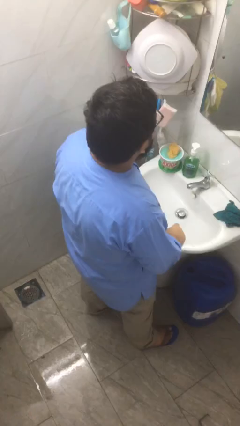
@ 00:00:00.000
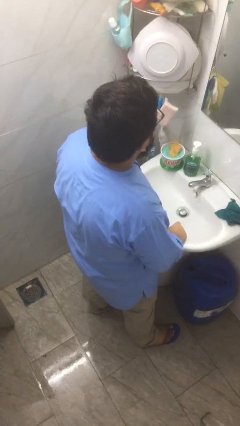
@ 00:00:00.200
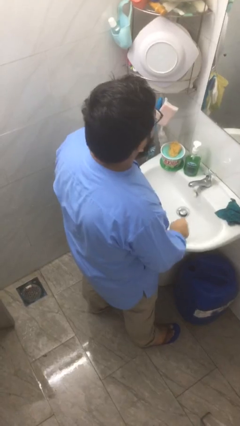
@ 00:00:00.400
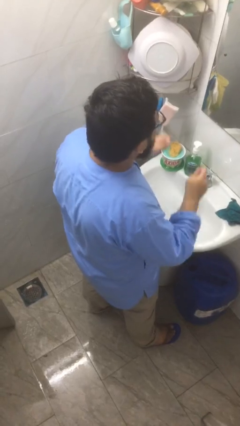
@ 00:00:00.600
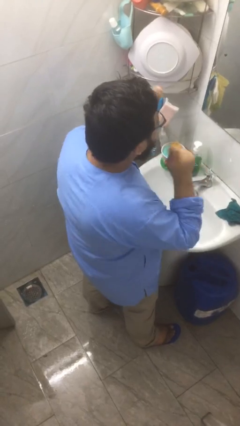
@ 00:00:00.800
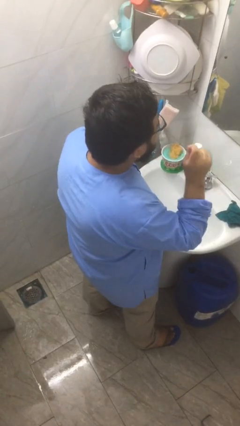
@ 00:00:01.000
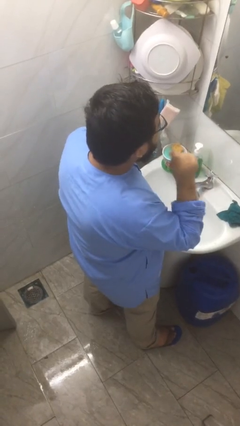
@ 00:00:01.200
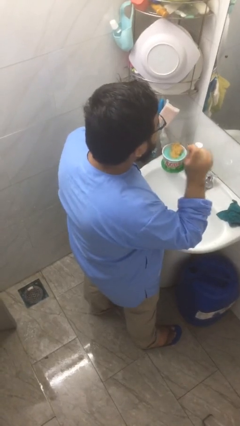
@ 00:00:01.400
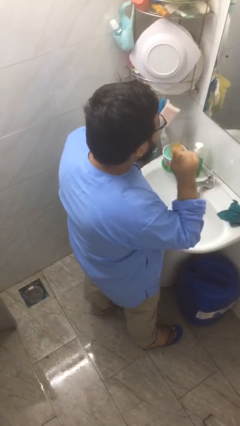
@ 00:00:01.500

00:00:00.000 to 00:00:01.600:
person flosses

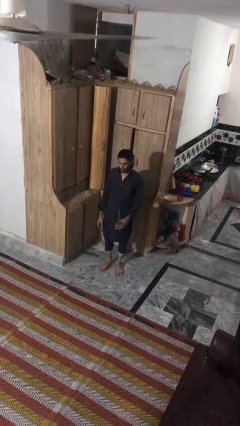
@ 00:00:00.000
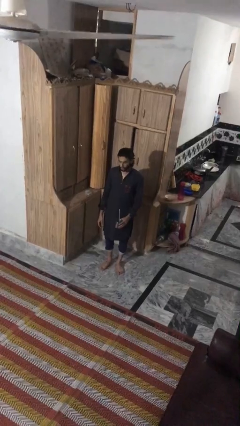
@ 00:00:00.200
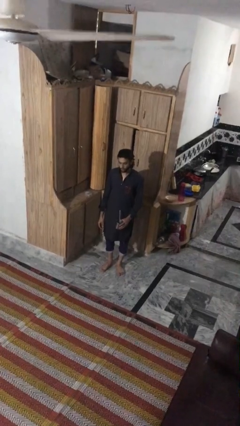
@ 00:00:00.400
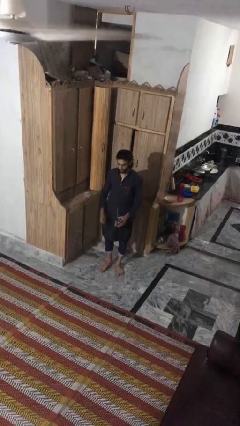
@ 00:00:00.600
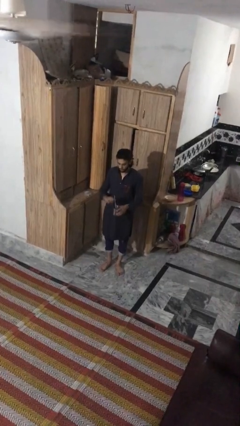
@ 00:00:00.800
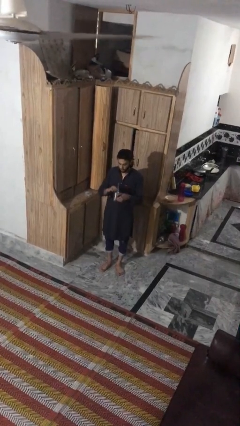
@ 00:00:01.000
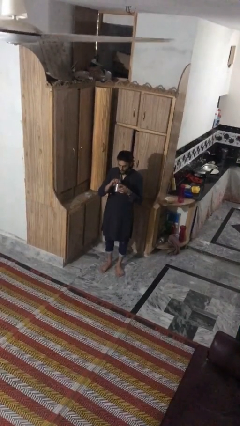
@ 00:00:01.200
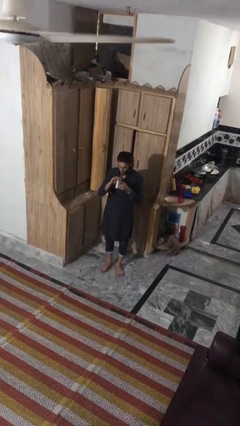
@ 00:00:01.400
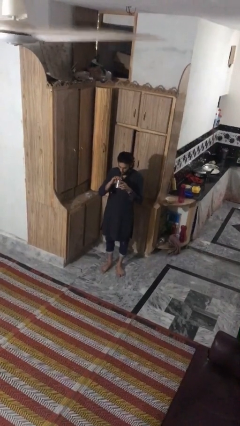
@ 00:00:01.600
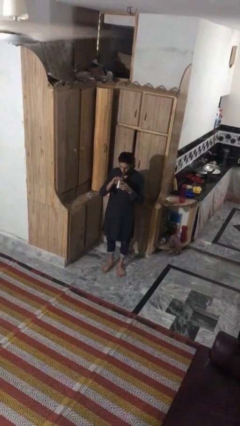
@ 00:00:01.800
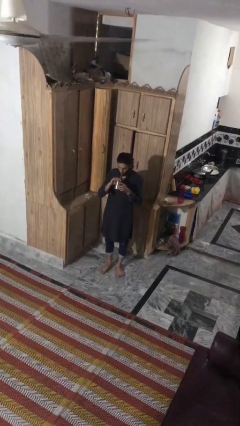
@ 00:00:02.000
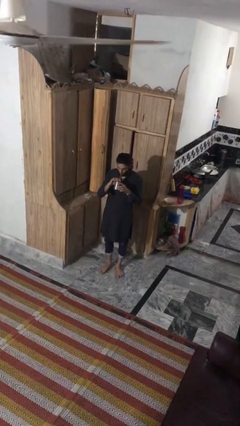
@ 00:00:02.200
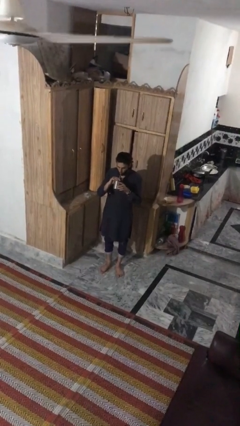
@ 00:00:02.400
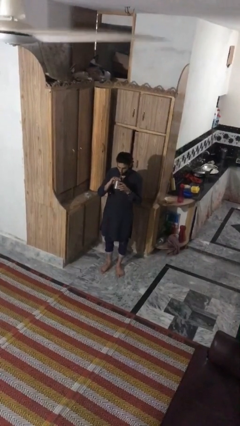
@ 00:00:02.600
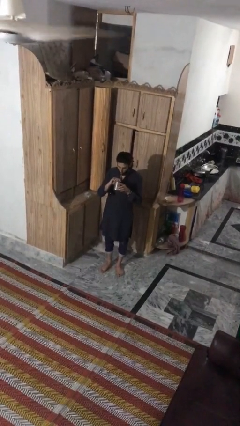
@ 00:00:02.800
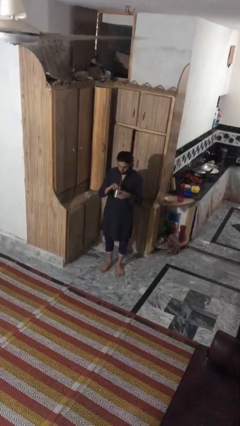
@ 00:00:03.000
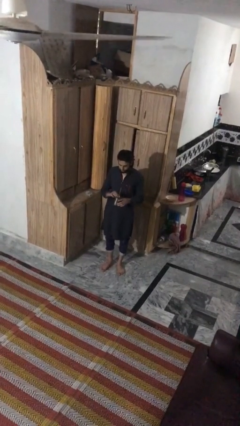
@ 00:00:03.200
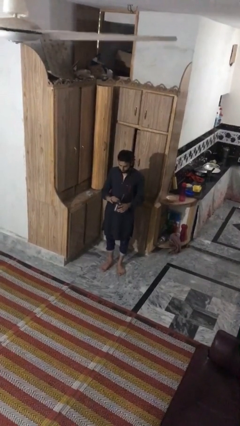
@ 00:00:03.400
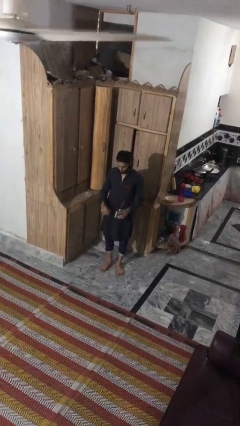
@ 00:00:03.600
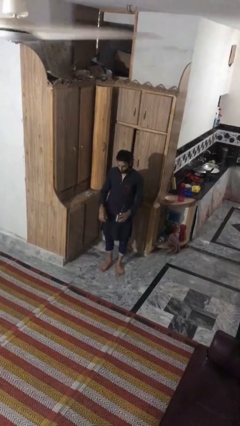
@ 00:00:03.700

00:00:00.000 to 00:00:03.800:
person drinks from straw

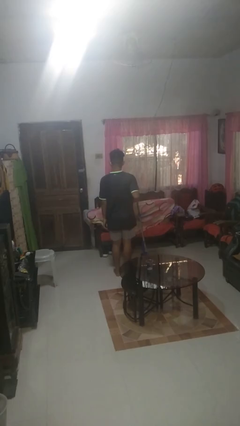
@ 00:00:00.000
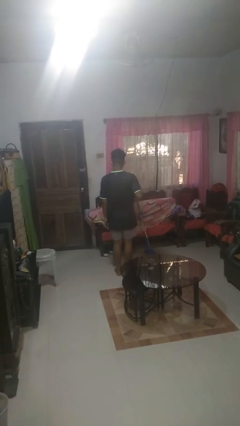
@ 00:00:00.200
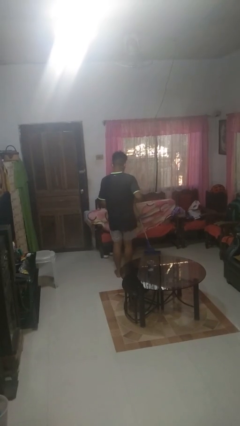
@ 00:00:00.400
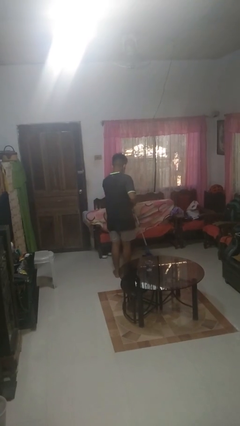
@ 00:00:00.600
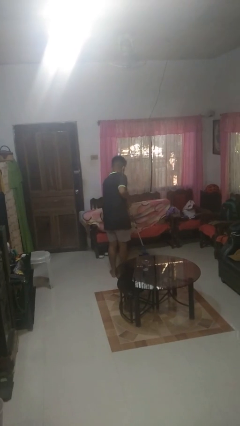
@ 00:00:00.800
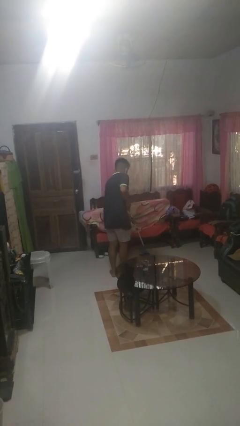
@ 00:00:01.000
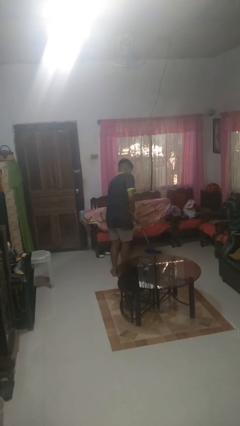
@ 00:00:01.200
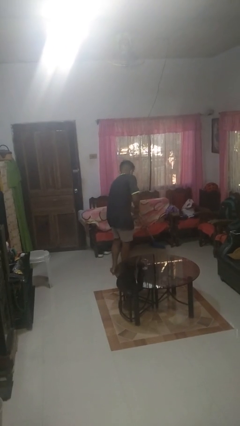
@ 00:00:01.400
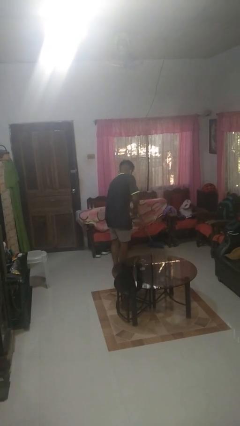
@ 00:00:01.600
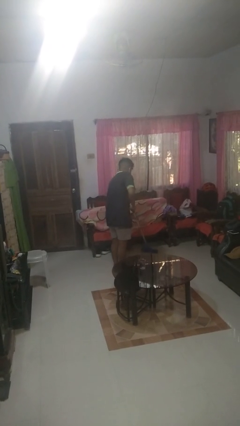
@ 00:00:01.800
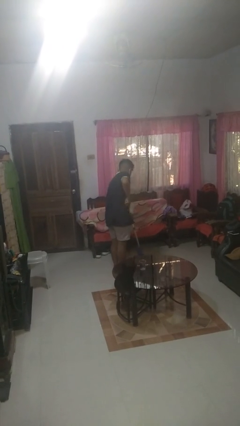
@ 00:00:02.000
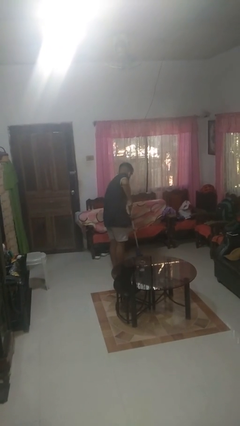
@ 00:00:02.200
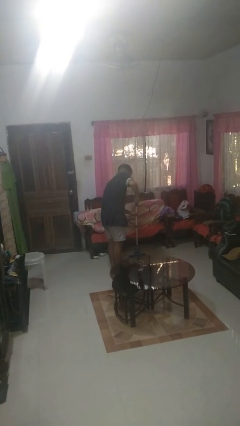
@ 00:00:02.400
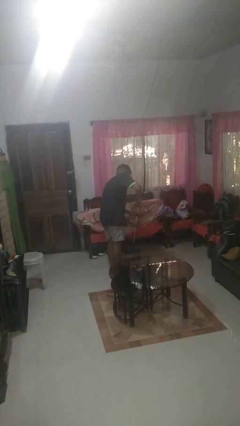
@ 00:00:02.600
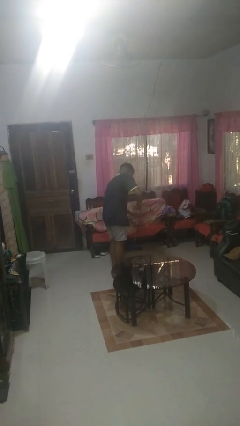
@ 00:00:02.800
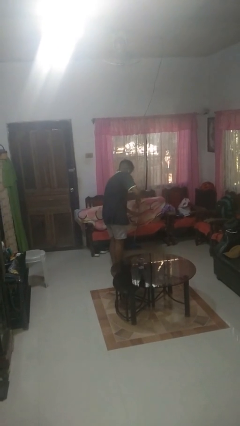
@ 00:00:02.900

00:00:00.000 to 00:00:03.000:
person mops

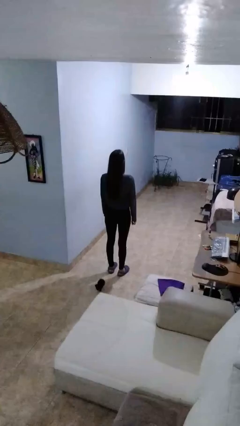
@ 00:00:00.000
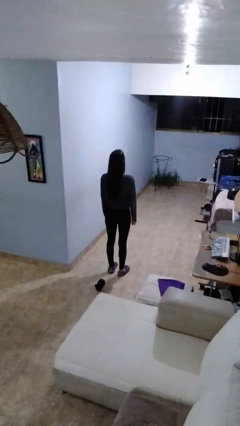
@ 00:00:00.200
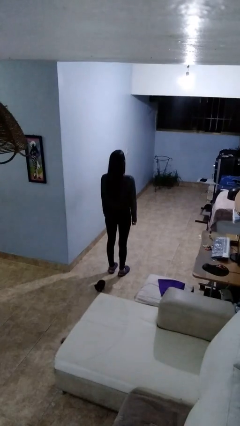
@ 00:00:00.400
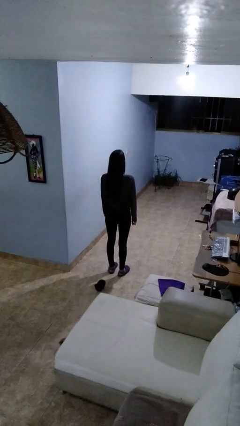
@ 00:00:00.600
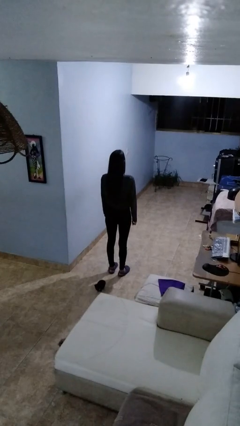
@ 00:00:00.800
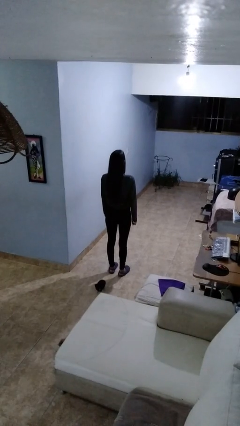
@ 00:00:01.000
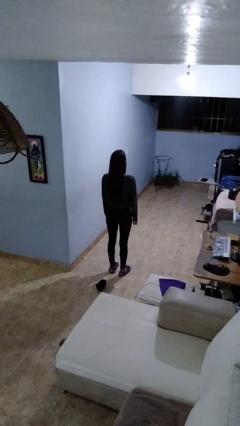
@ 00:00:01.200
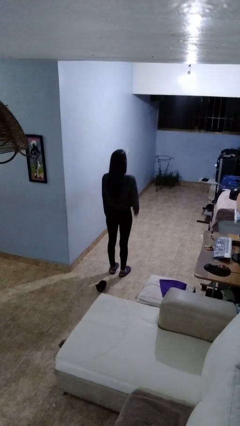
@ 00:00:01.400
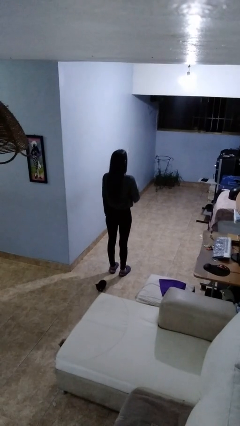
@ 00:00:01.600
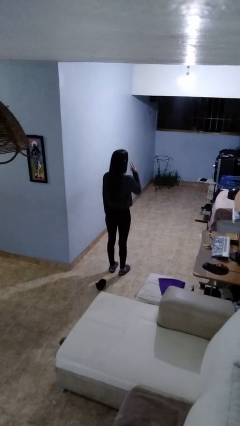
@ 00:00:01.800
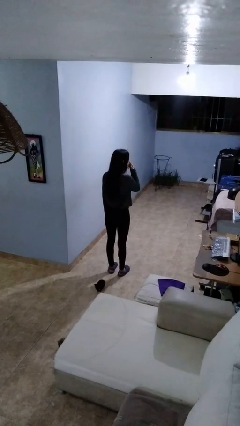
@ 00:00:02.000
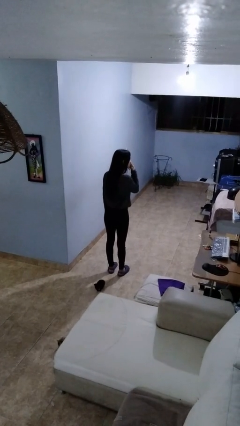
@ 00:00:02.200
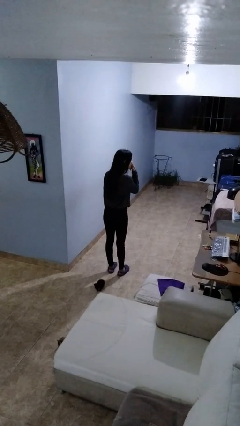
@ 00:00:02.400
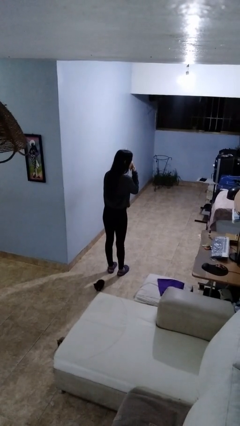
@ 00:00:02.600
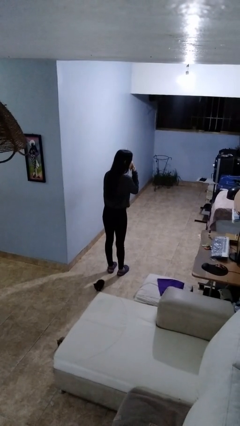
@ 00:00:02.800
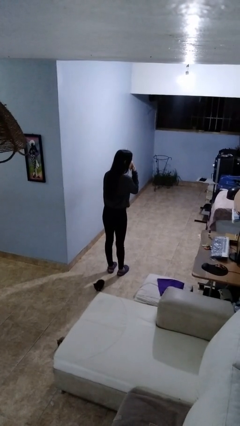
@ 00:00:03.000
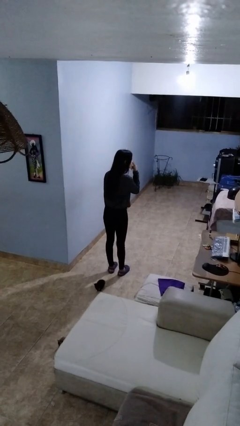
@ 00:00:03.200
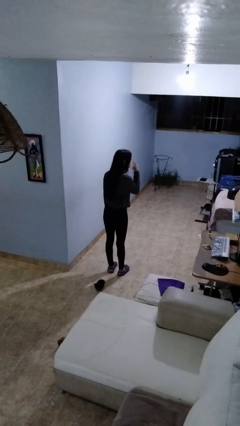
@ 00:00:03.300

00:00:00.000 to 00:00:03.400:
person gestures watch closely

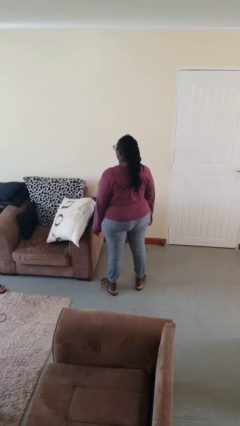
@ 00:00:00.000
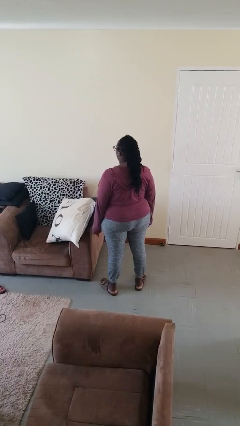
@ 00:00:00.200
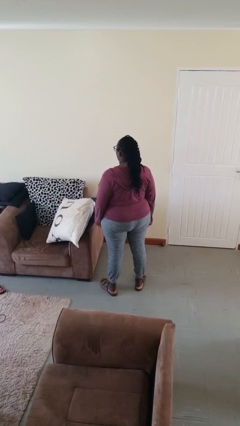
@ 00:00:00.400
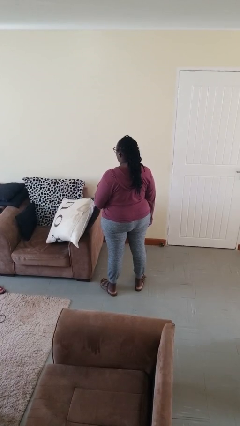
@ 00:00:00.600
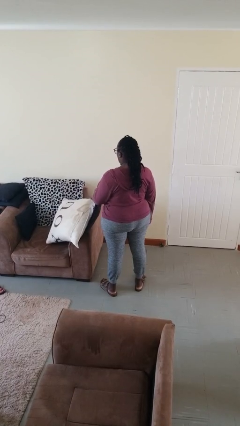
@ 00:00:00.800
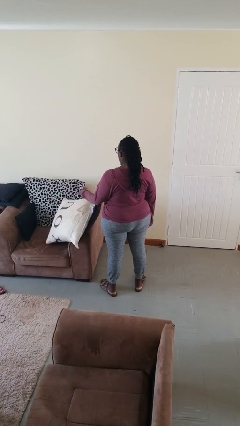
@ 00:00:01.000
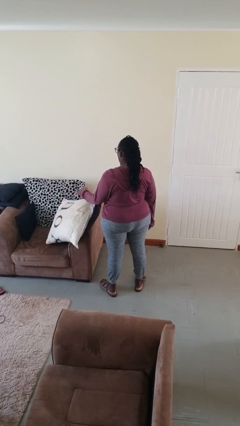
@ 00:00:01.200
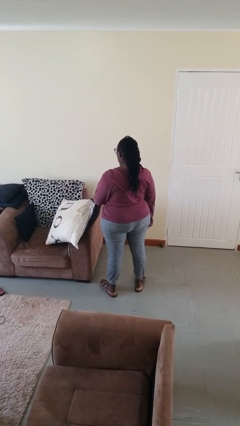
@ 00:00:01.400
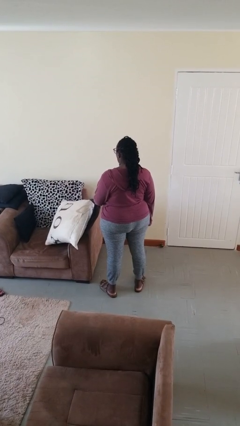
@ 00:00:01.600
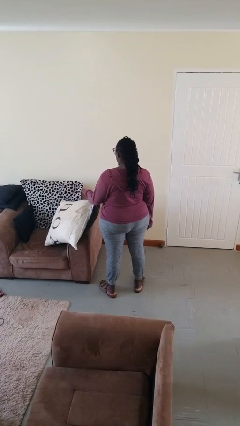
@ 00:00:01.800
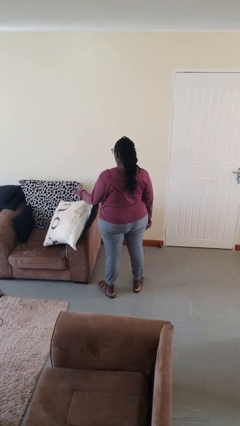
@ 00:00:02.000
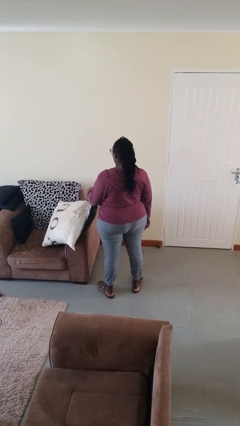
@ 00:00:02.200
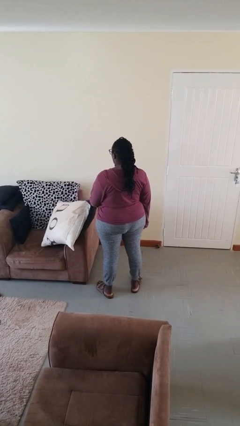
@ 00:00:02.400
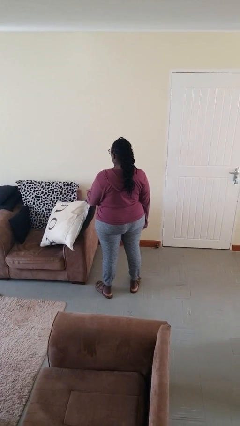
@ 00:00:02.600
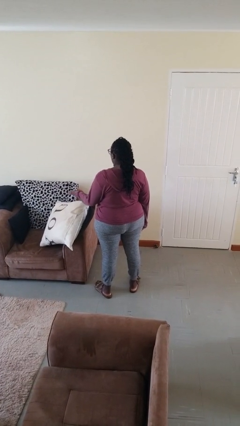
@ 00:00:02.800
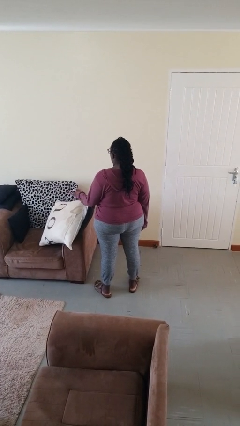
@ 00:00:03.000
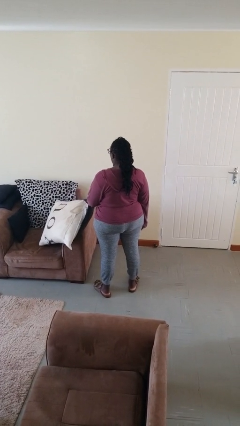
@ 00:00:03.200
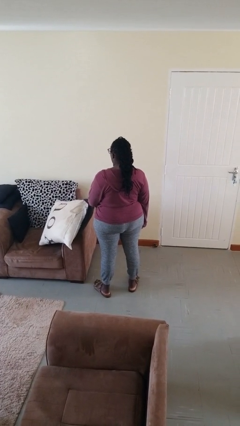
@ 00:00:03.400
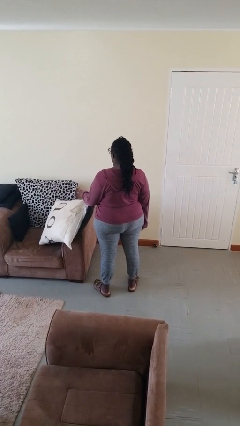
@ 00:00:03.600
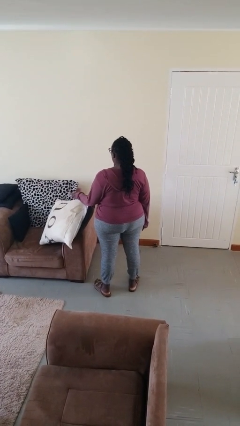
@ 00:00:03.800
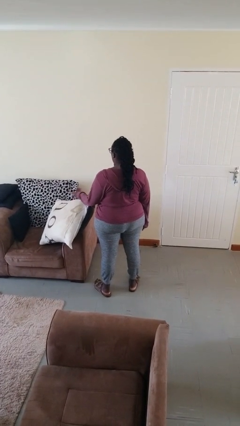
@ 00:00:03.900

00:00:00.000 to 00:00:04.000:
person waves hand over object

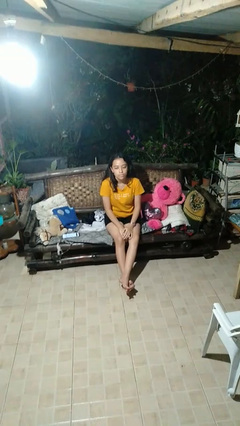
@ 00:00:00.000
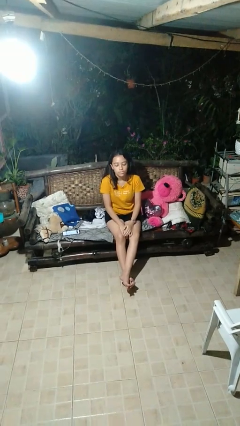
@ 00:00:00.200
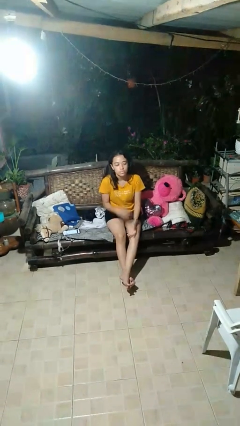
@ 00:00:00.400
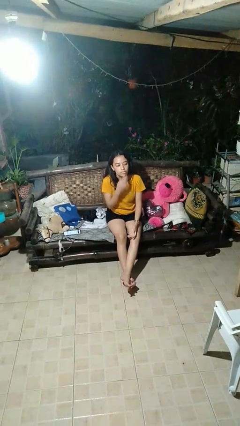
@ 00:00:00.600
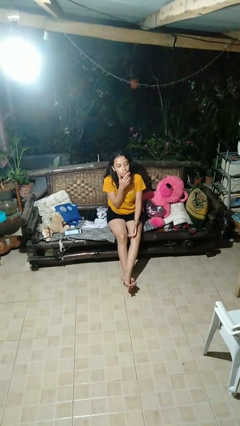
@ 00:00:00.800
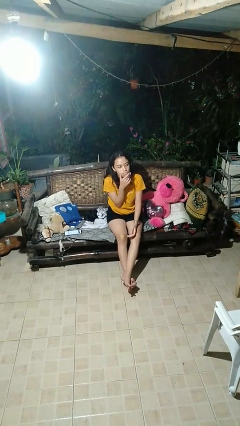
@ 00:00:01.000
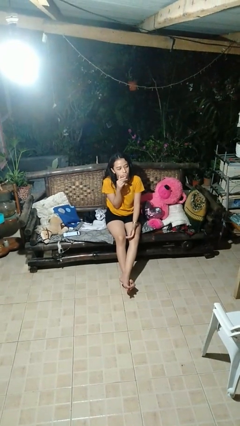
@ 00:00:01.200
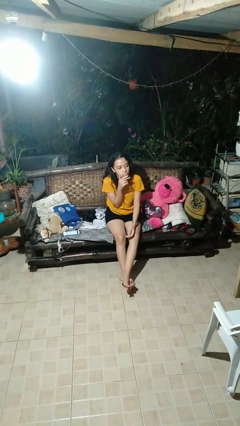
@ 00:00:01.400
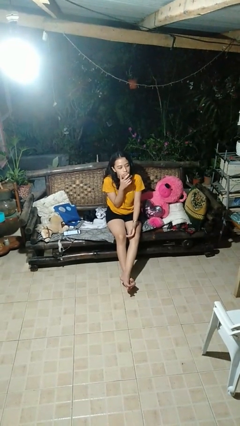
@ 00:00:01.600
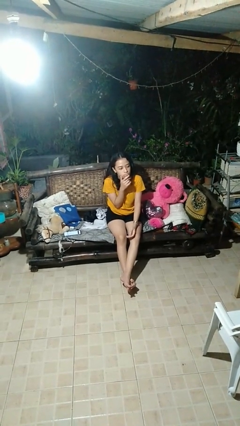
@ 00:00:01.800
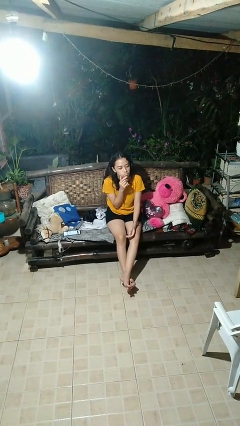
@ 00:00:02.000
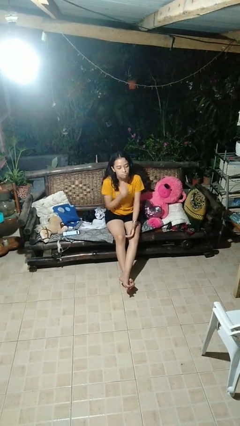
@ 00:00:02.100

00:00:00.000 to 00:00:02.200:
person strokes chin
